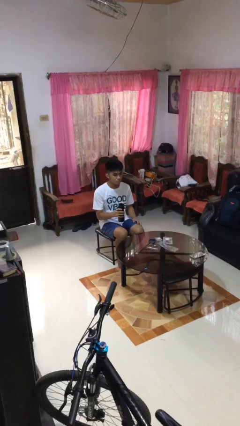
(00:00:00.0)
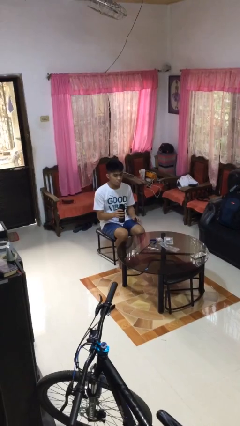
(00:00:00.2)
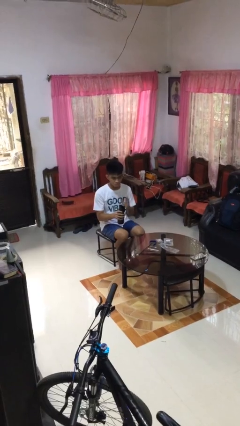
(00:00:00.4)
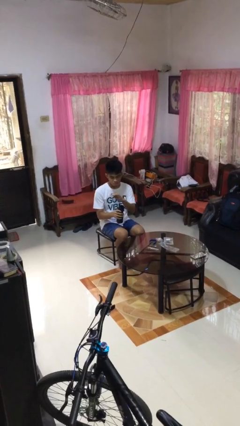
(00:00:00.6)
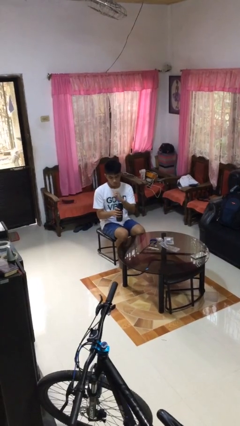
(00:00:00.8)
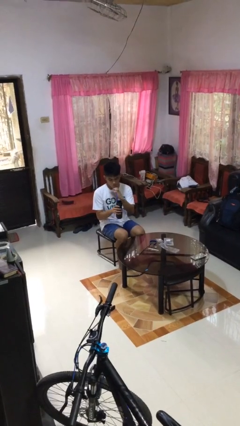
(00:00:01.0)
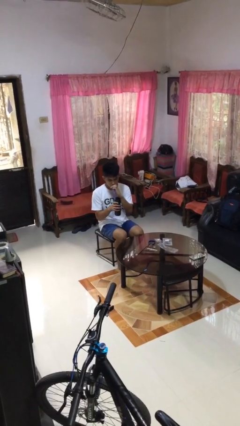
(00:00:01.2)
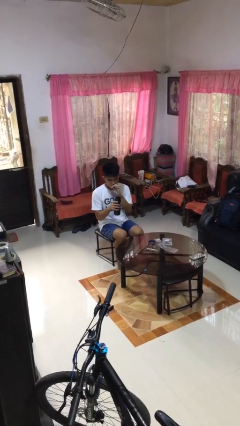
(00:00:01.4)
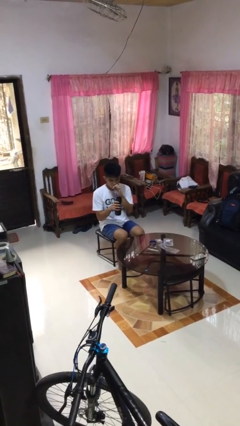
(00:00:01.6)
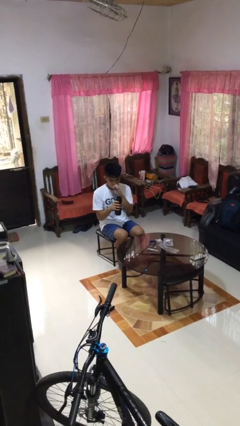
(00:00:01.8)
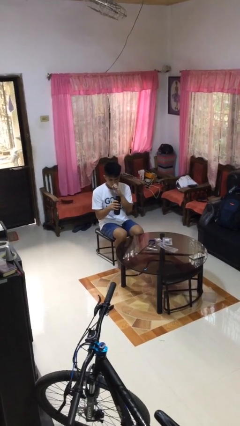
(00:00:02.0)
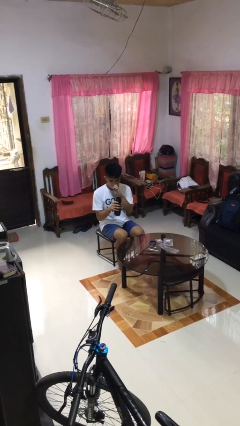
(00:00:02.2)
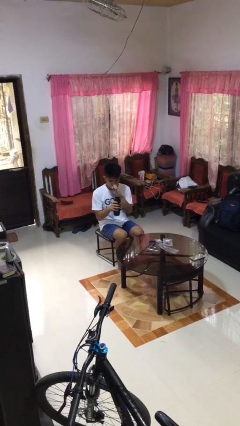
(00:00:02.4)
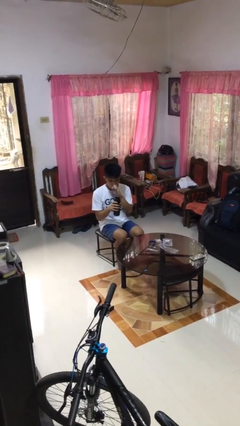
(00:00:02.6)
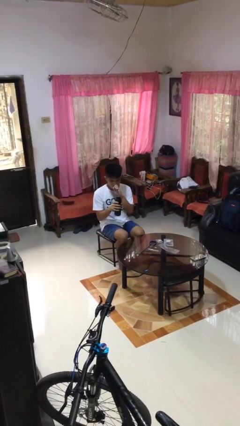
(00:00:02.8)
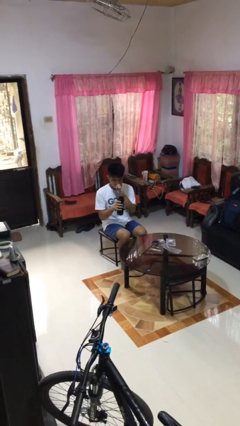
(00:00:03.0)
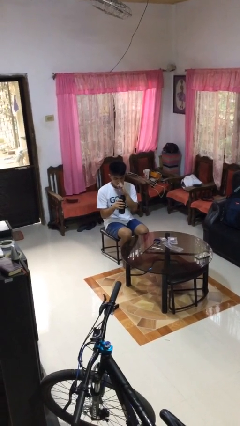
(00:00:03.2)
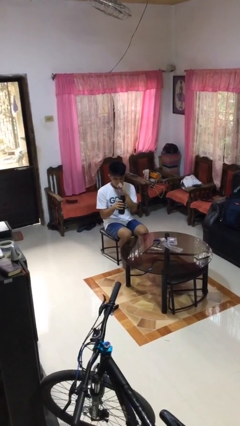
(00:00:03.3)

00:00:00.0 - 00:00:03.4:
person drinks from straw

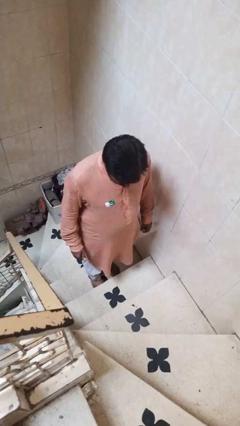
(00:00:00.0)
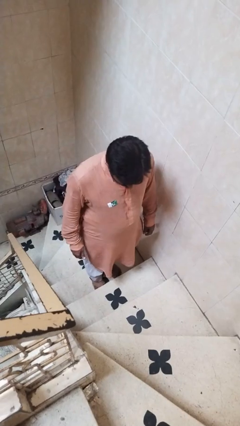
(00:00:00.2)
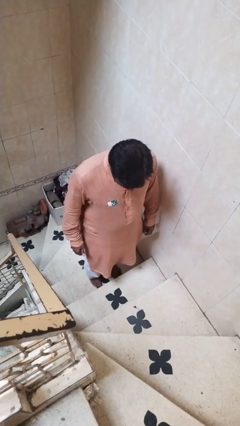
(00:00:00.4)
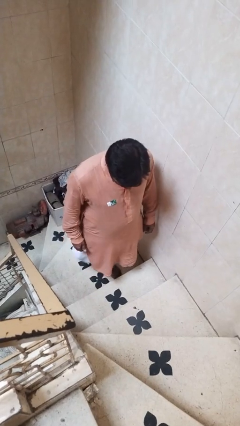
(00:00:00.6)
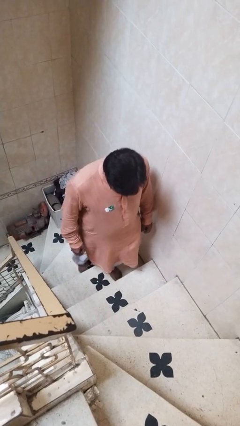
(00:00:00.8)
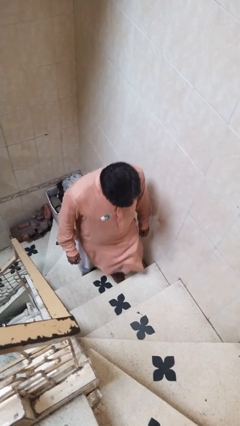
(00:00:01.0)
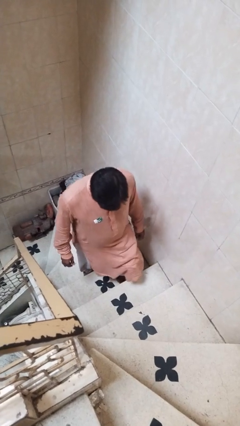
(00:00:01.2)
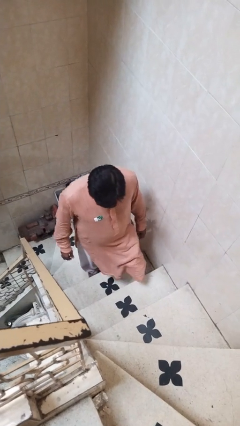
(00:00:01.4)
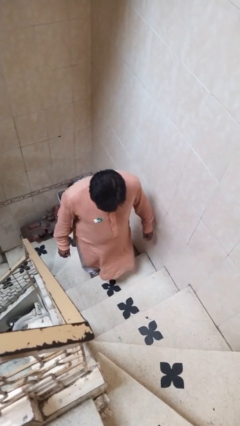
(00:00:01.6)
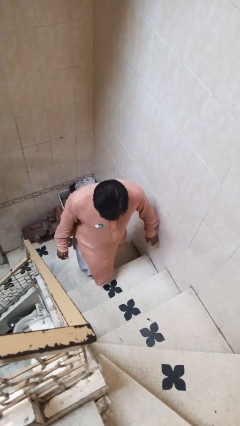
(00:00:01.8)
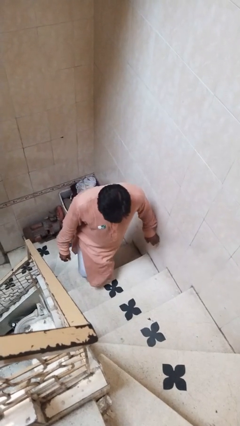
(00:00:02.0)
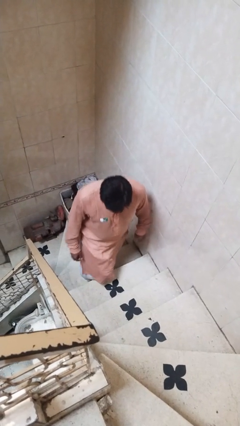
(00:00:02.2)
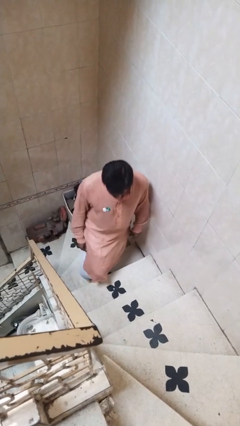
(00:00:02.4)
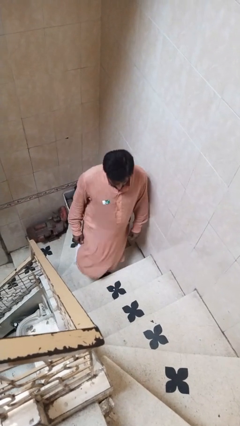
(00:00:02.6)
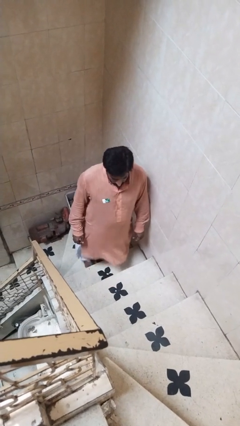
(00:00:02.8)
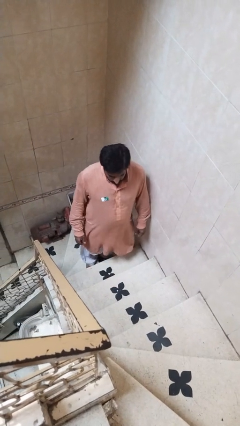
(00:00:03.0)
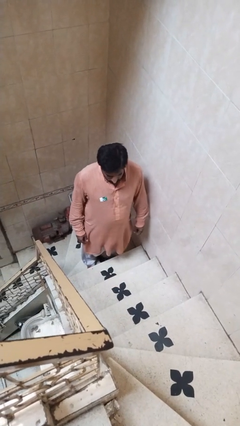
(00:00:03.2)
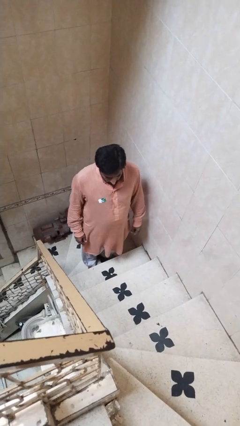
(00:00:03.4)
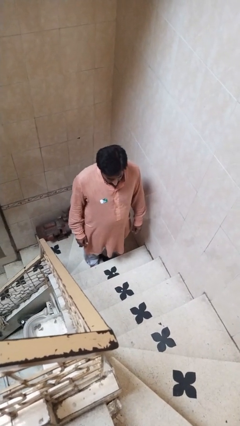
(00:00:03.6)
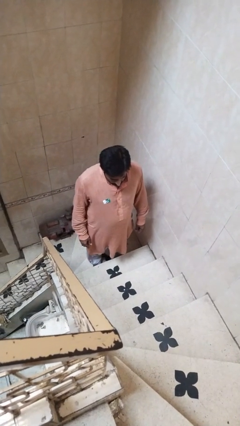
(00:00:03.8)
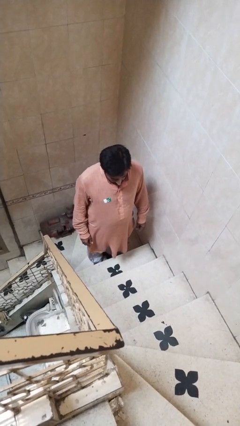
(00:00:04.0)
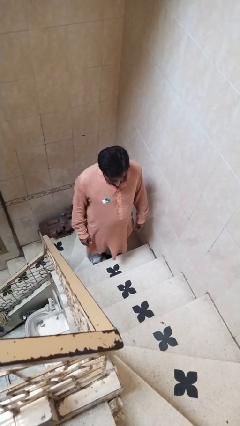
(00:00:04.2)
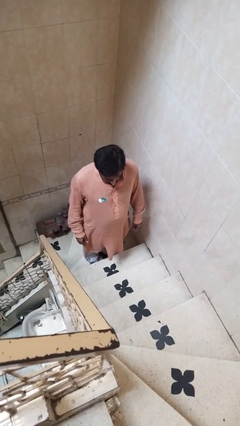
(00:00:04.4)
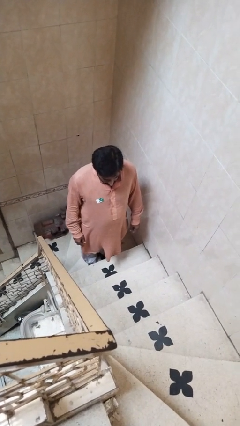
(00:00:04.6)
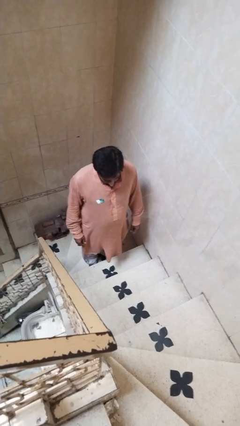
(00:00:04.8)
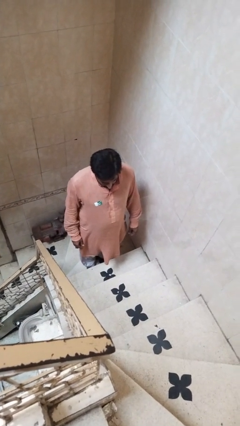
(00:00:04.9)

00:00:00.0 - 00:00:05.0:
person climbs down stairs

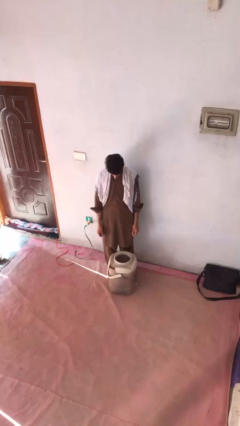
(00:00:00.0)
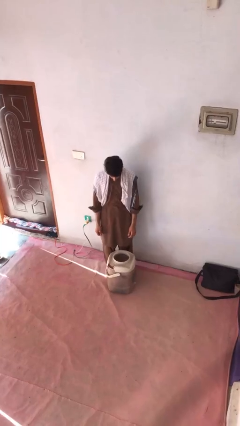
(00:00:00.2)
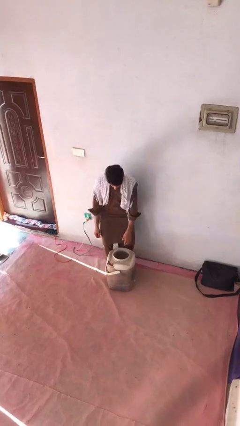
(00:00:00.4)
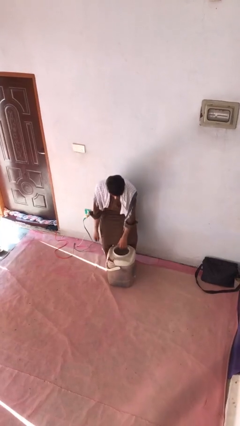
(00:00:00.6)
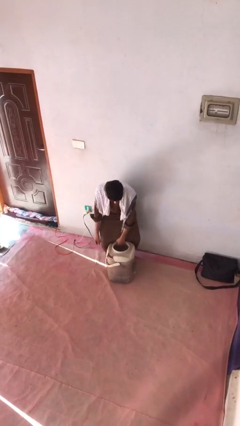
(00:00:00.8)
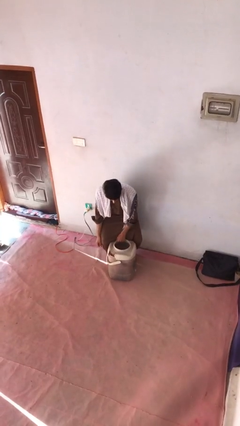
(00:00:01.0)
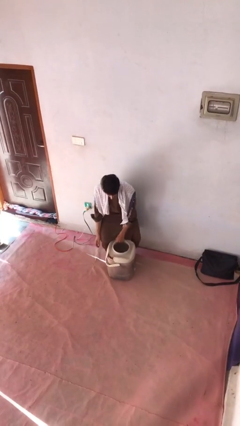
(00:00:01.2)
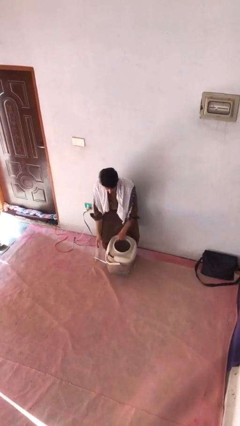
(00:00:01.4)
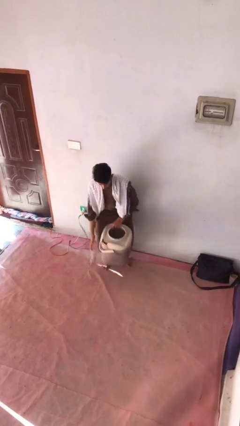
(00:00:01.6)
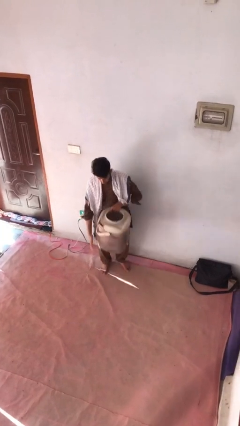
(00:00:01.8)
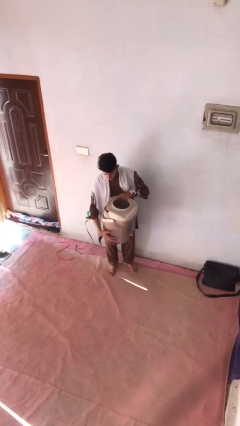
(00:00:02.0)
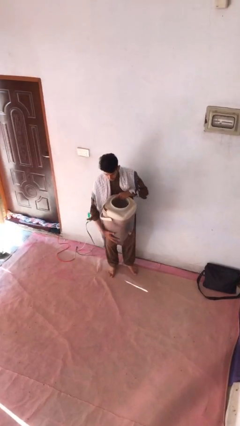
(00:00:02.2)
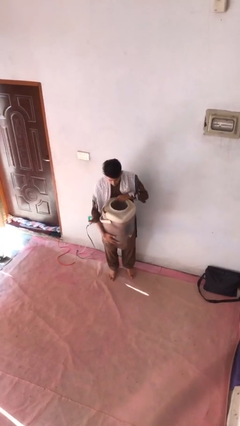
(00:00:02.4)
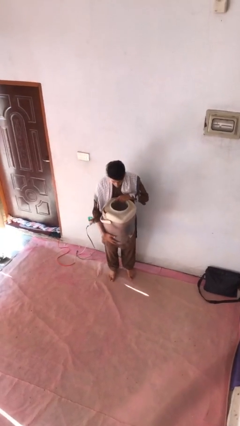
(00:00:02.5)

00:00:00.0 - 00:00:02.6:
person picks up object from floor

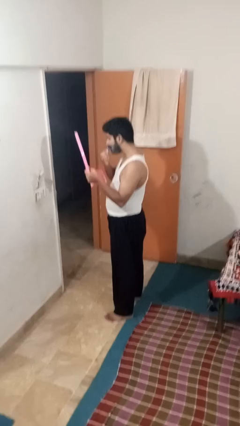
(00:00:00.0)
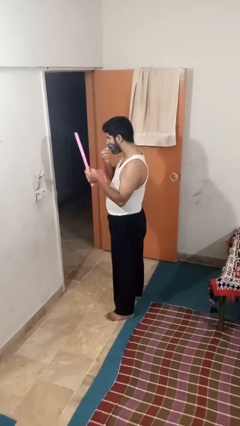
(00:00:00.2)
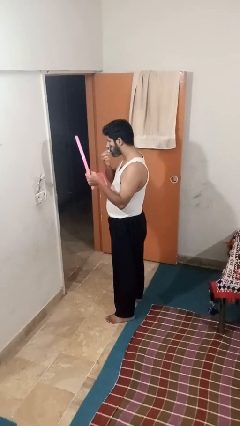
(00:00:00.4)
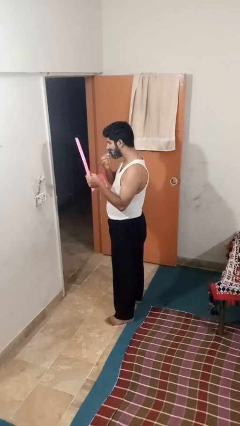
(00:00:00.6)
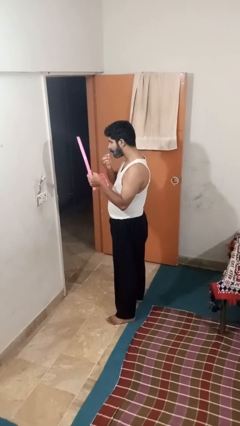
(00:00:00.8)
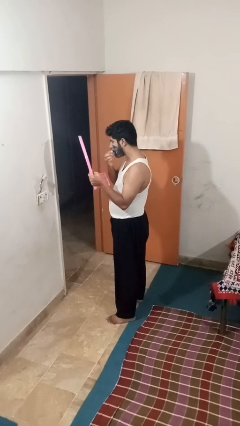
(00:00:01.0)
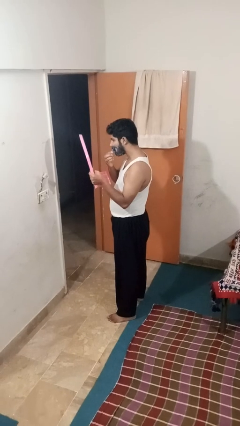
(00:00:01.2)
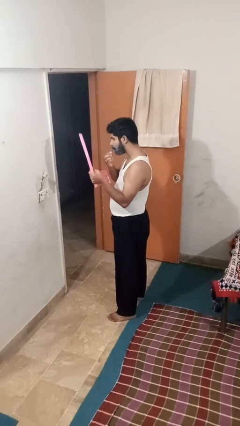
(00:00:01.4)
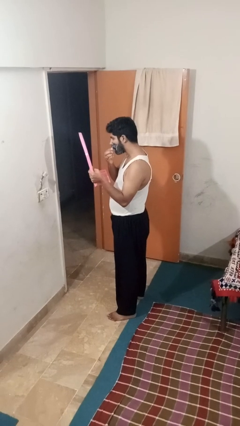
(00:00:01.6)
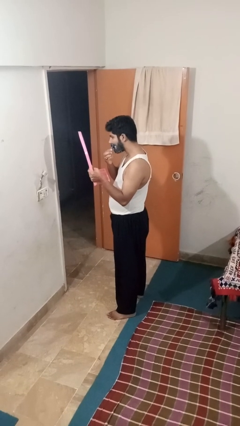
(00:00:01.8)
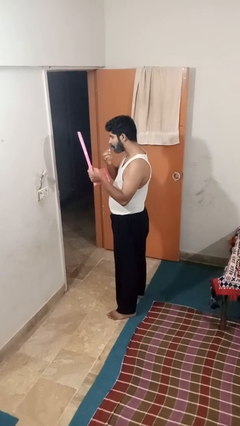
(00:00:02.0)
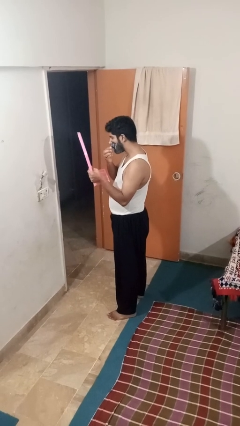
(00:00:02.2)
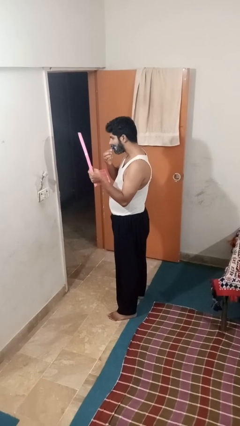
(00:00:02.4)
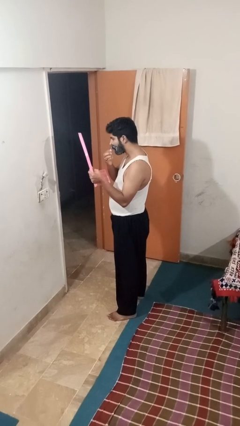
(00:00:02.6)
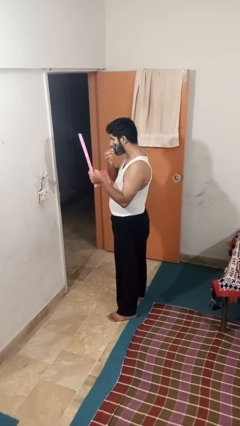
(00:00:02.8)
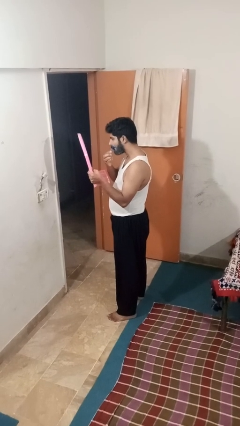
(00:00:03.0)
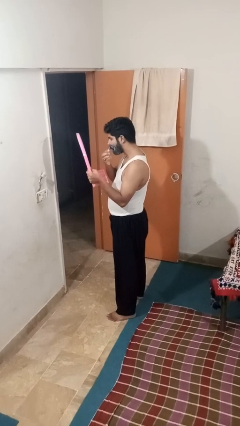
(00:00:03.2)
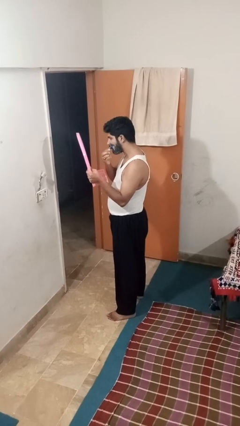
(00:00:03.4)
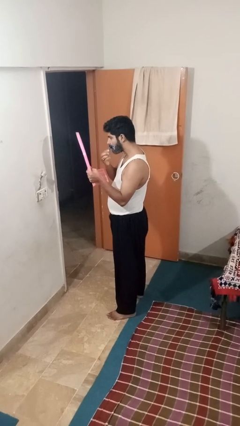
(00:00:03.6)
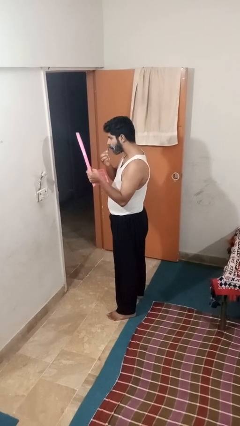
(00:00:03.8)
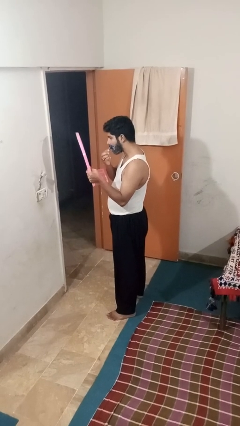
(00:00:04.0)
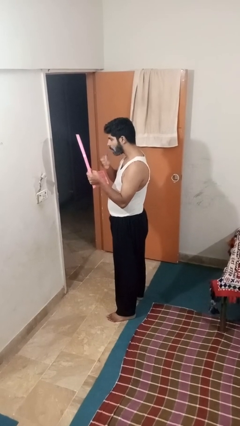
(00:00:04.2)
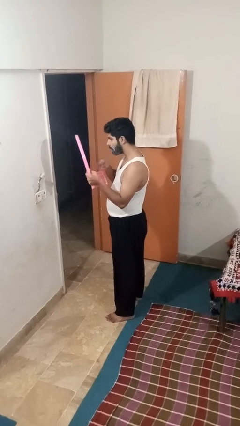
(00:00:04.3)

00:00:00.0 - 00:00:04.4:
person shaves face

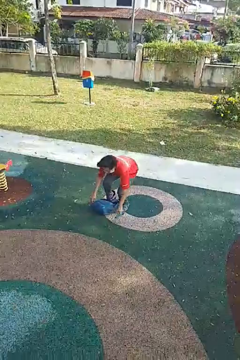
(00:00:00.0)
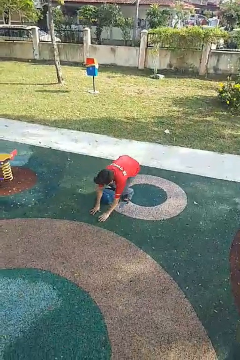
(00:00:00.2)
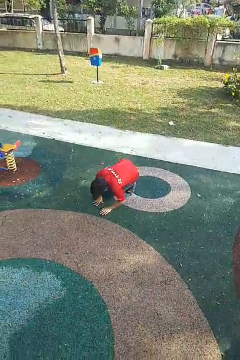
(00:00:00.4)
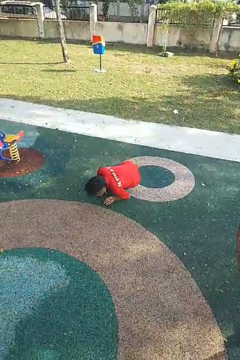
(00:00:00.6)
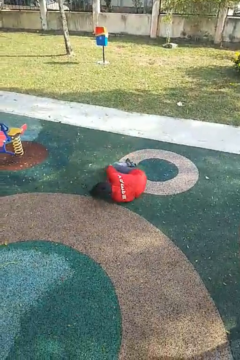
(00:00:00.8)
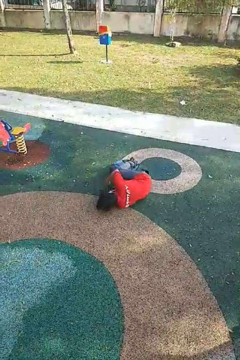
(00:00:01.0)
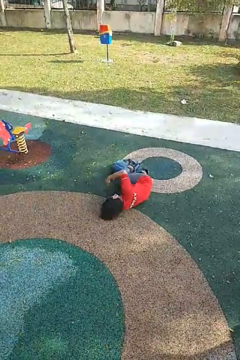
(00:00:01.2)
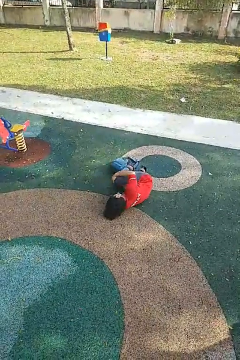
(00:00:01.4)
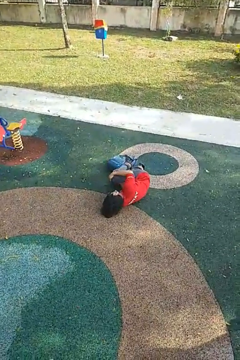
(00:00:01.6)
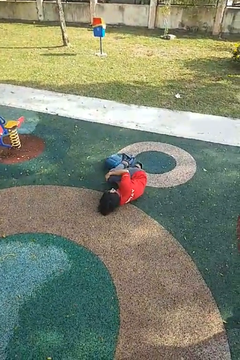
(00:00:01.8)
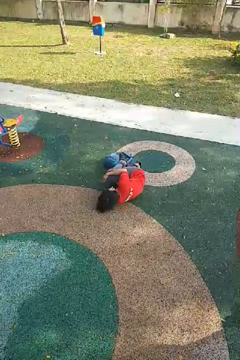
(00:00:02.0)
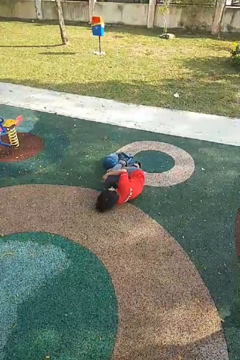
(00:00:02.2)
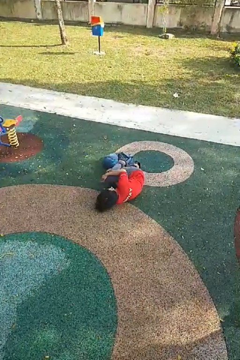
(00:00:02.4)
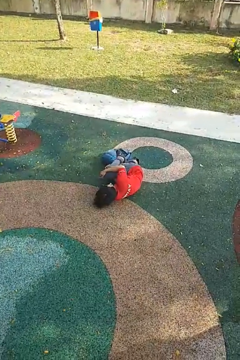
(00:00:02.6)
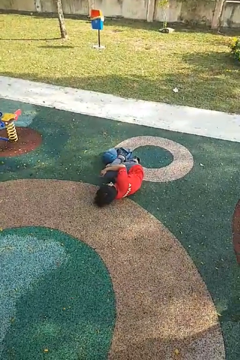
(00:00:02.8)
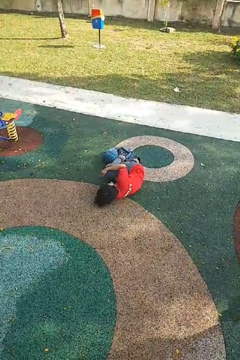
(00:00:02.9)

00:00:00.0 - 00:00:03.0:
person lies down on floor
